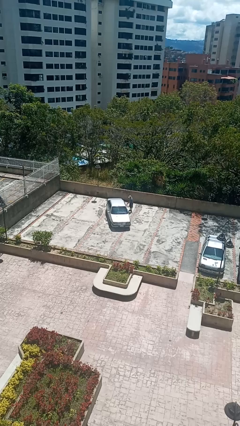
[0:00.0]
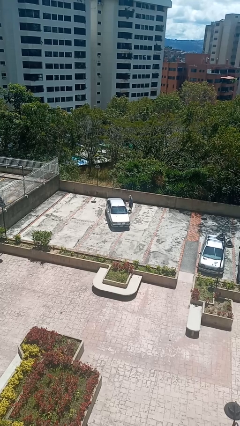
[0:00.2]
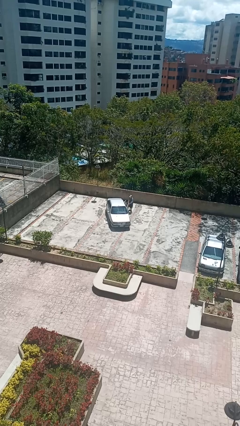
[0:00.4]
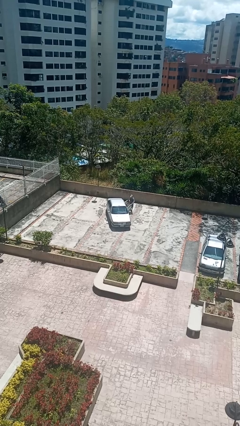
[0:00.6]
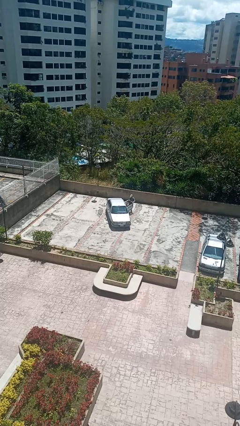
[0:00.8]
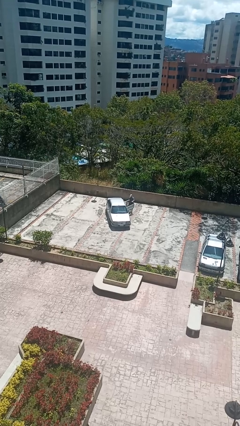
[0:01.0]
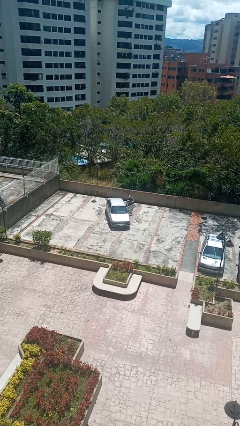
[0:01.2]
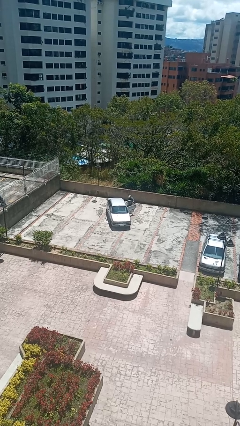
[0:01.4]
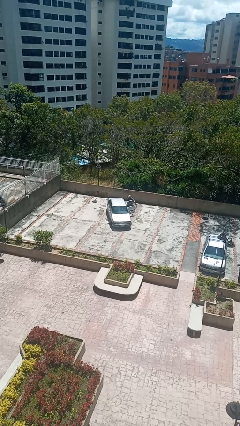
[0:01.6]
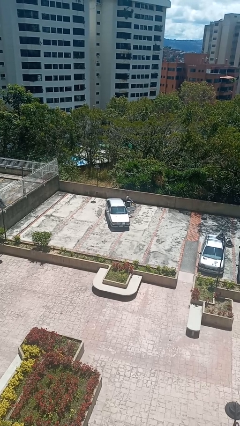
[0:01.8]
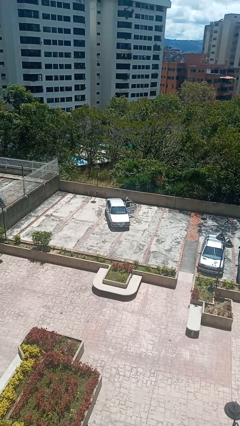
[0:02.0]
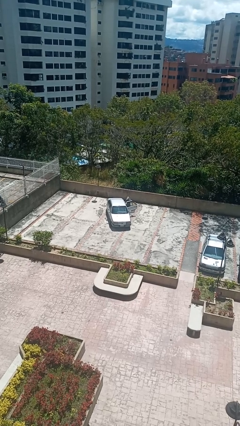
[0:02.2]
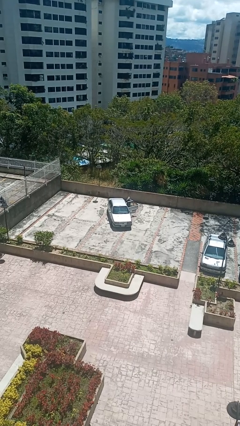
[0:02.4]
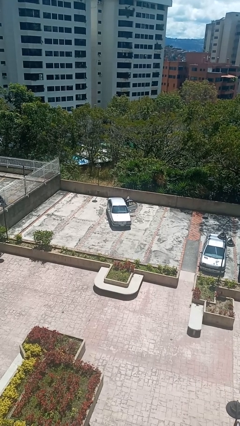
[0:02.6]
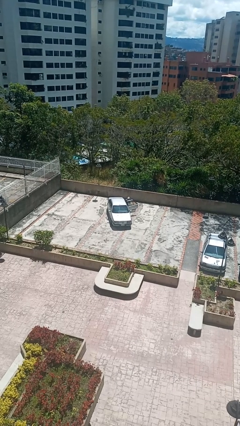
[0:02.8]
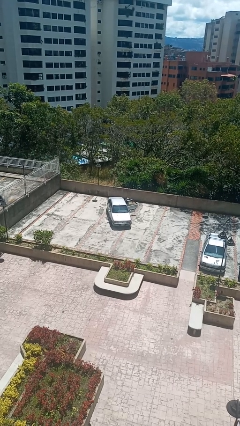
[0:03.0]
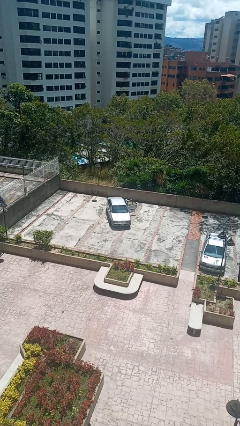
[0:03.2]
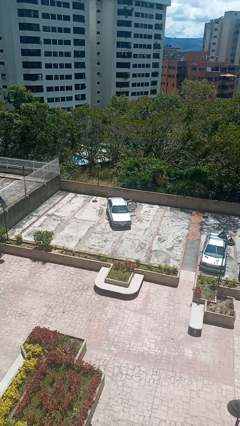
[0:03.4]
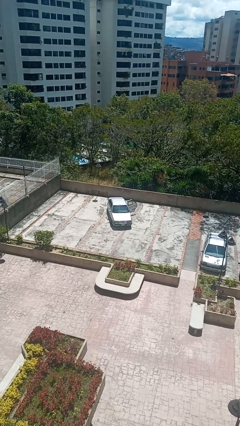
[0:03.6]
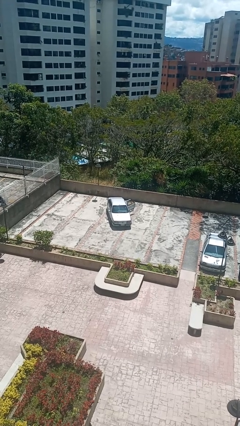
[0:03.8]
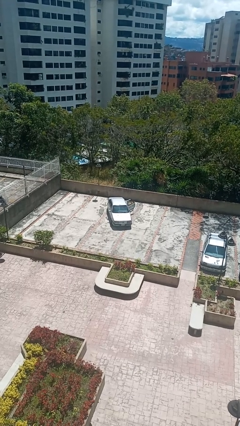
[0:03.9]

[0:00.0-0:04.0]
car picks up person

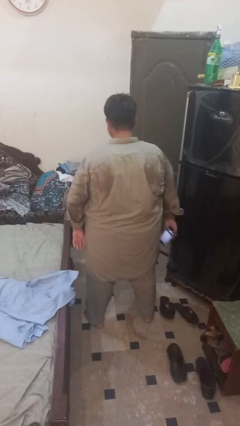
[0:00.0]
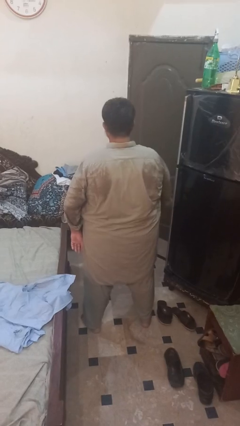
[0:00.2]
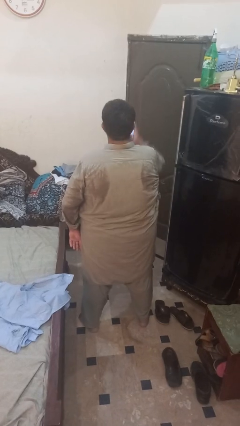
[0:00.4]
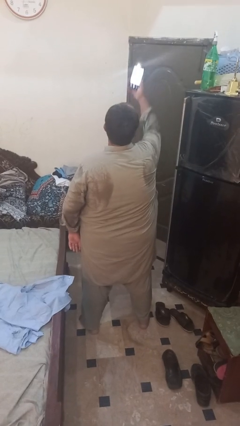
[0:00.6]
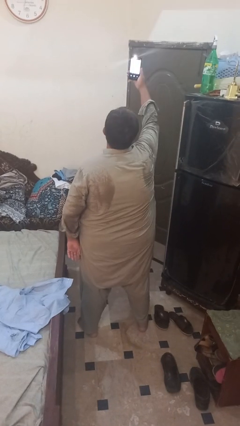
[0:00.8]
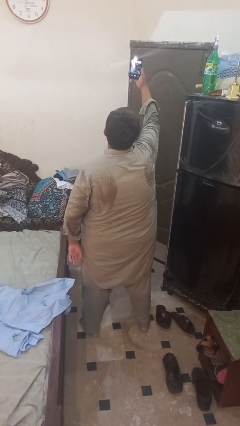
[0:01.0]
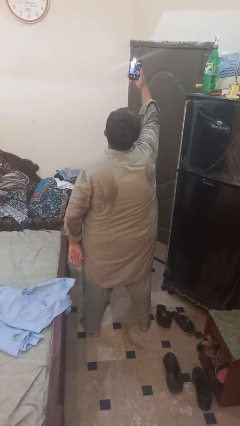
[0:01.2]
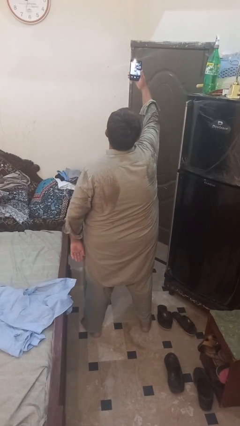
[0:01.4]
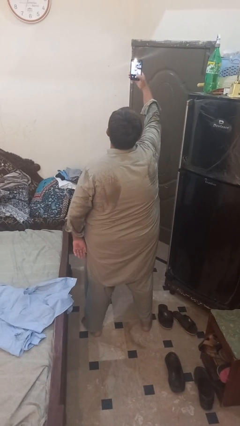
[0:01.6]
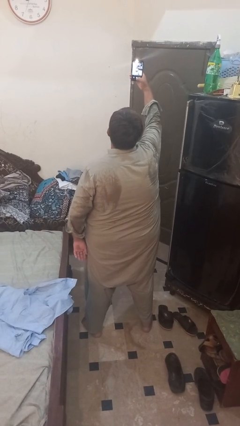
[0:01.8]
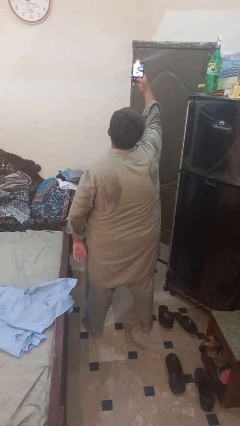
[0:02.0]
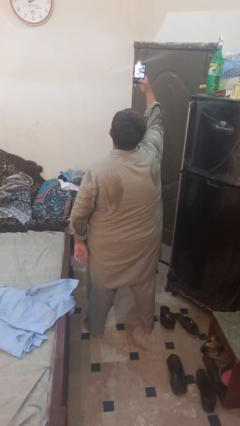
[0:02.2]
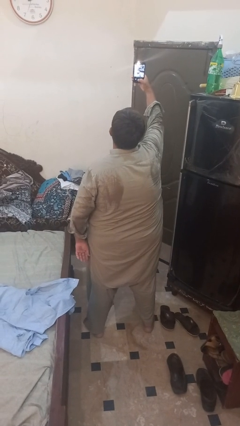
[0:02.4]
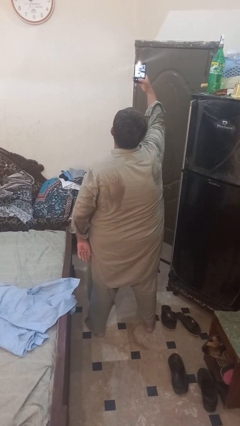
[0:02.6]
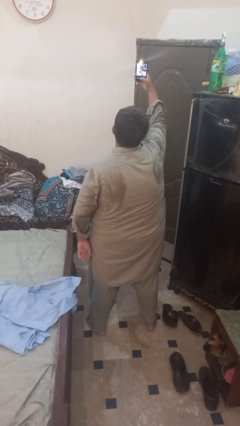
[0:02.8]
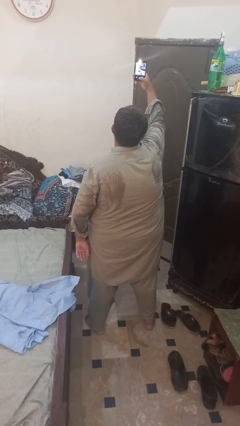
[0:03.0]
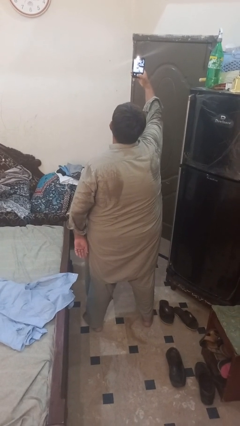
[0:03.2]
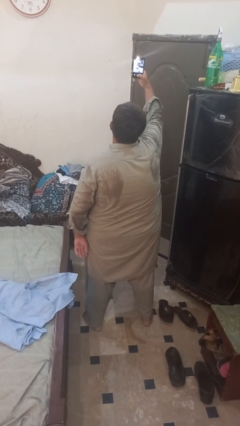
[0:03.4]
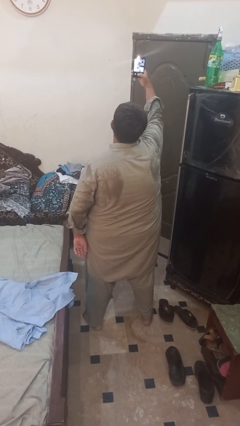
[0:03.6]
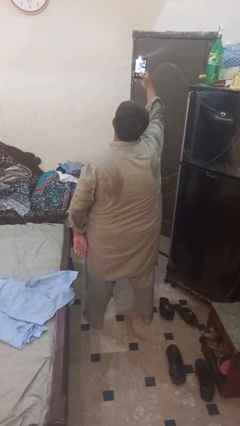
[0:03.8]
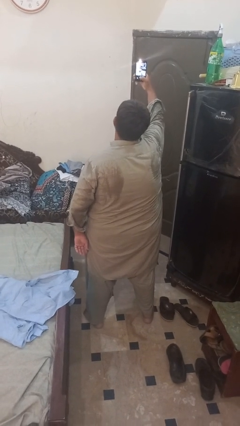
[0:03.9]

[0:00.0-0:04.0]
person takes selfie

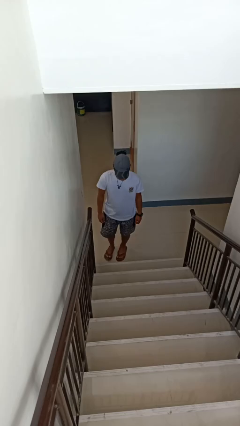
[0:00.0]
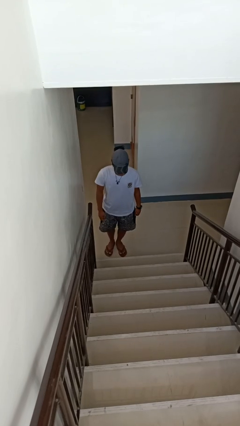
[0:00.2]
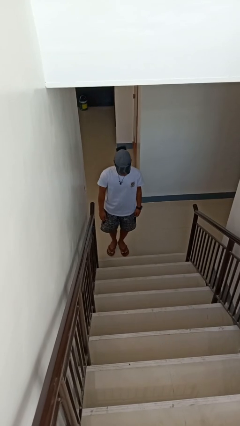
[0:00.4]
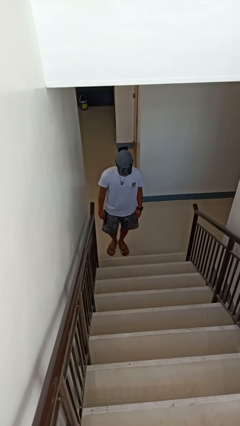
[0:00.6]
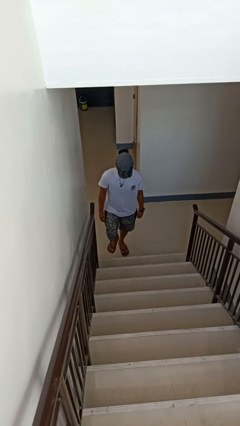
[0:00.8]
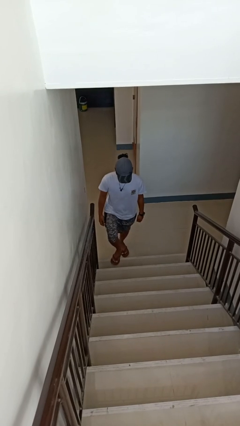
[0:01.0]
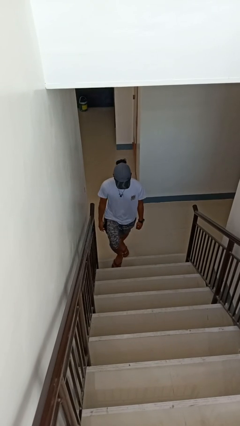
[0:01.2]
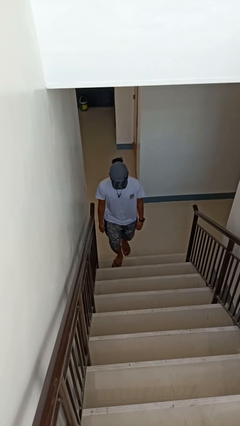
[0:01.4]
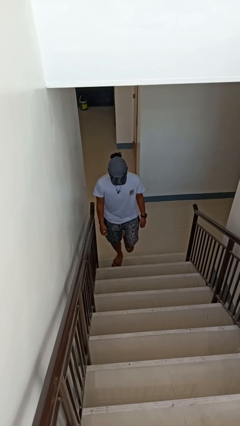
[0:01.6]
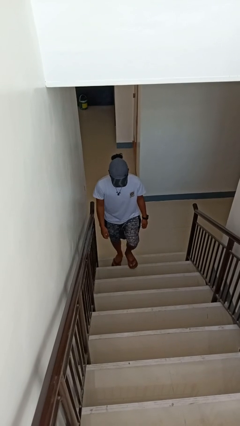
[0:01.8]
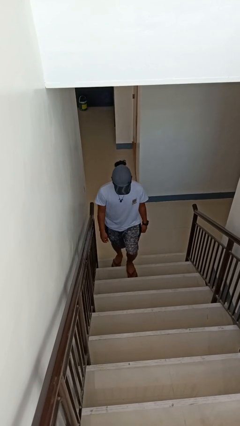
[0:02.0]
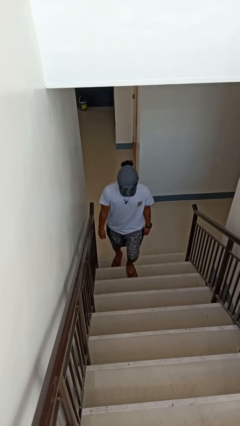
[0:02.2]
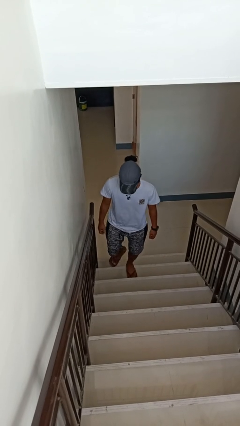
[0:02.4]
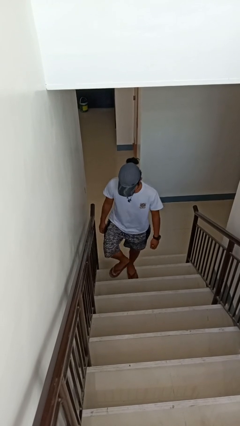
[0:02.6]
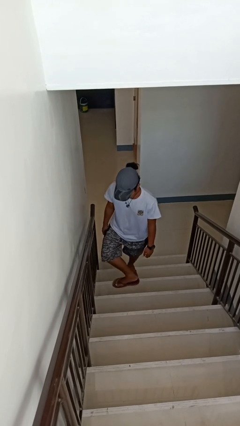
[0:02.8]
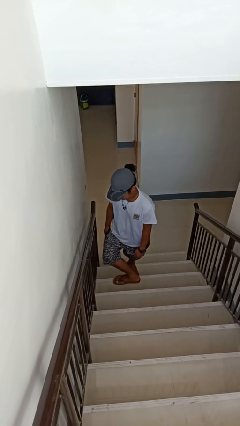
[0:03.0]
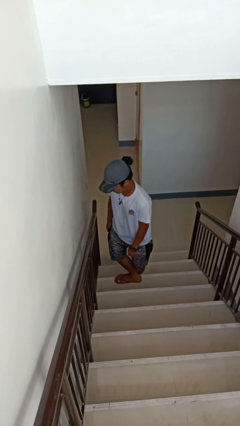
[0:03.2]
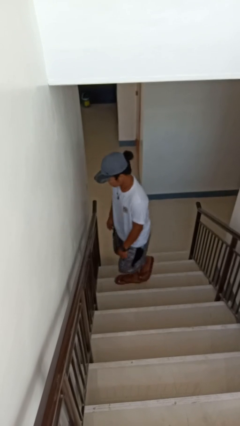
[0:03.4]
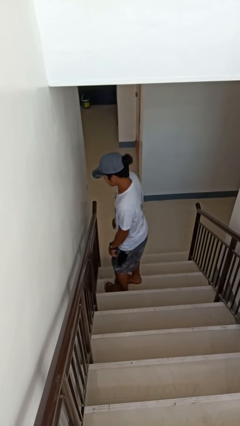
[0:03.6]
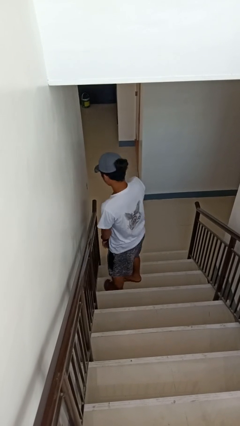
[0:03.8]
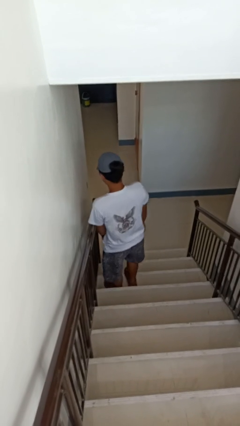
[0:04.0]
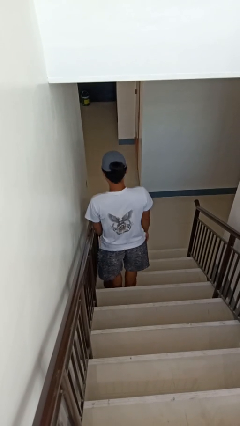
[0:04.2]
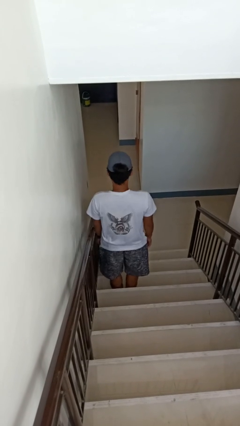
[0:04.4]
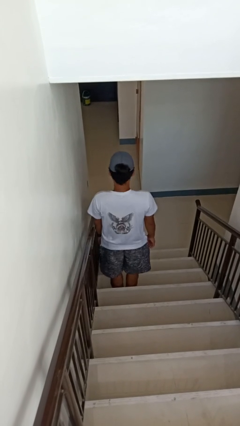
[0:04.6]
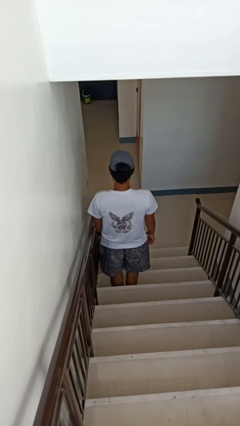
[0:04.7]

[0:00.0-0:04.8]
person climbs up stairs

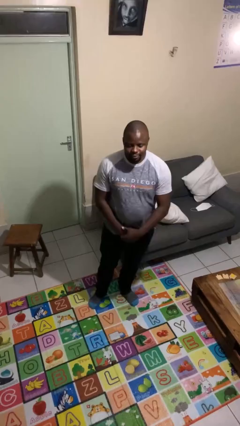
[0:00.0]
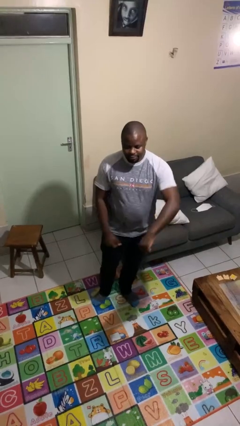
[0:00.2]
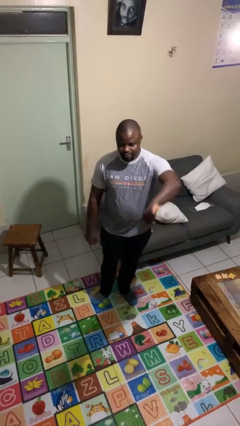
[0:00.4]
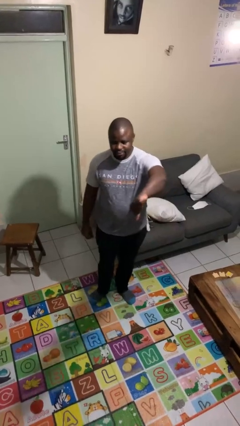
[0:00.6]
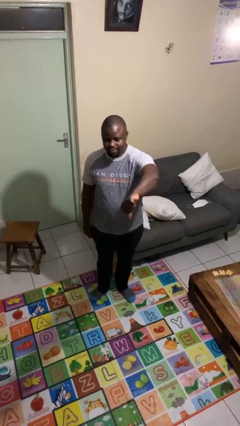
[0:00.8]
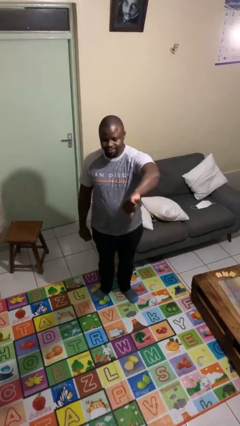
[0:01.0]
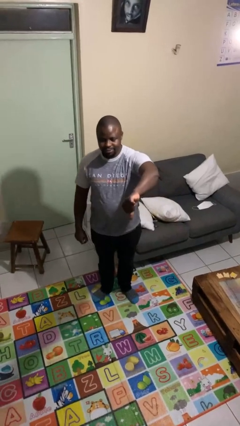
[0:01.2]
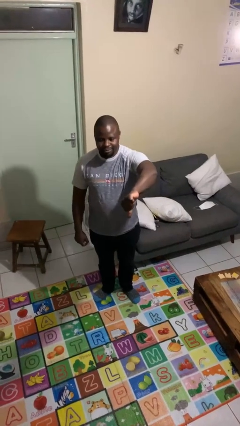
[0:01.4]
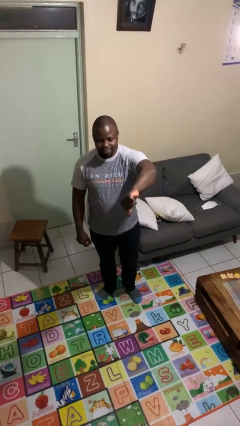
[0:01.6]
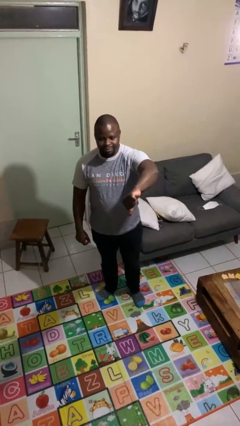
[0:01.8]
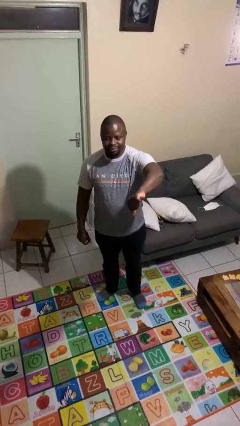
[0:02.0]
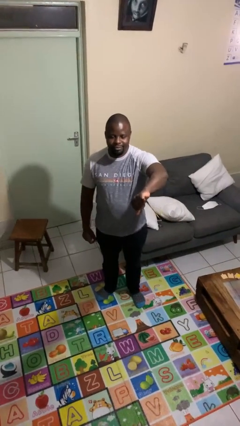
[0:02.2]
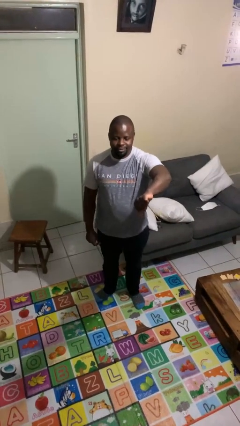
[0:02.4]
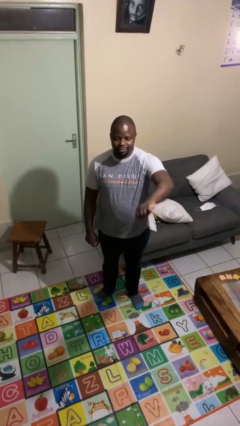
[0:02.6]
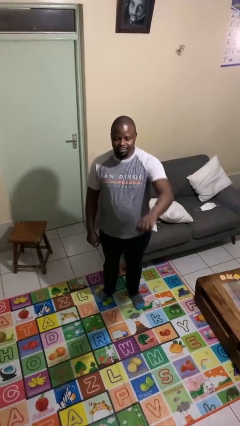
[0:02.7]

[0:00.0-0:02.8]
person gestures thumbs down

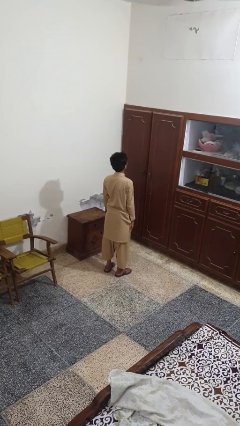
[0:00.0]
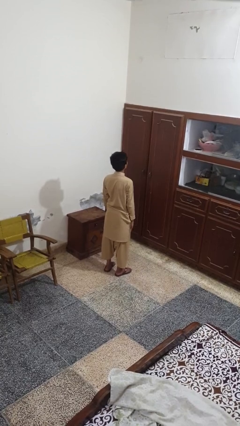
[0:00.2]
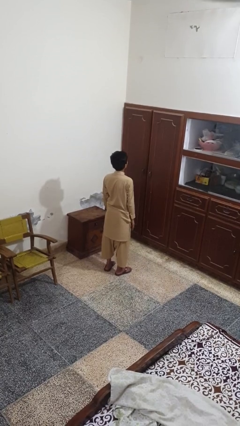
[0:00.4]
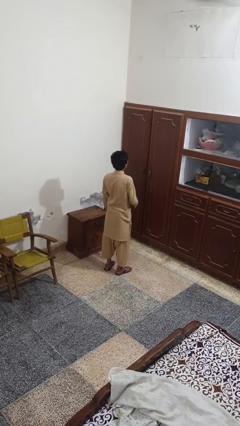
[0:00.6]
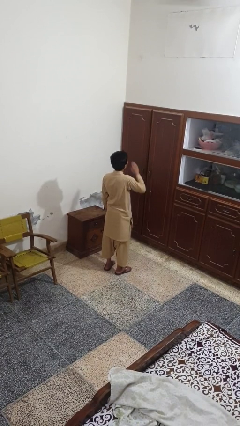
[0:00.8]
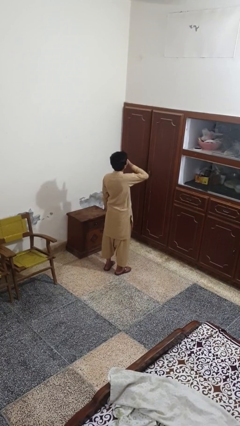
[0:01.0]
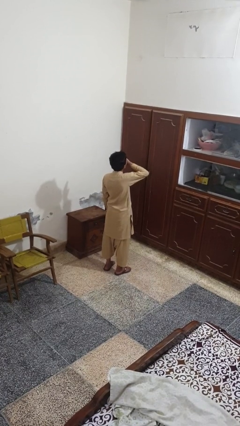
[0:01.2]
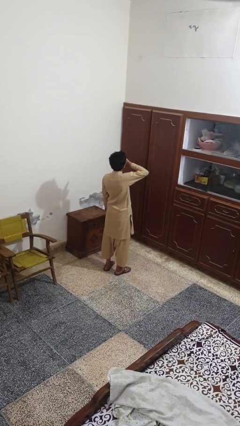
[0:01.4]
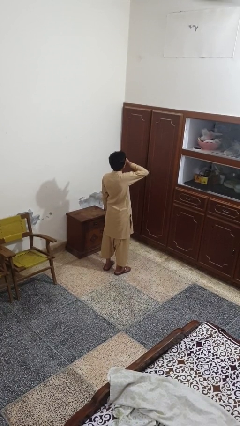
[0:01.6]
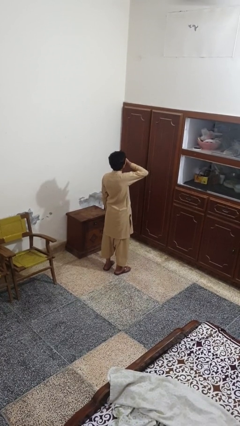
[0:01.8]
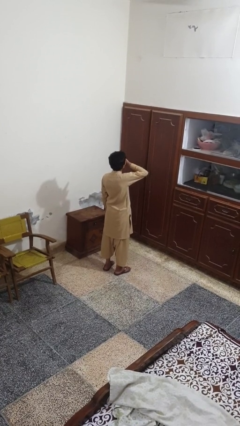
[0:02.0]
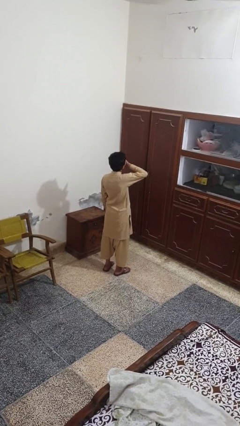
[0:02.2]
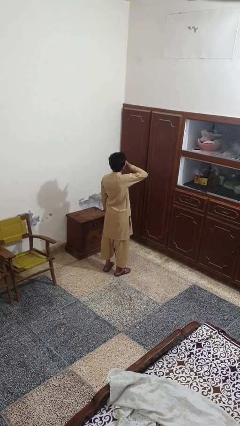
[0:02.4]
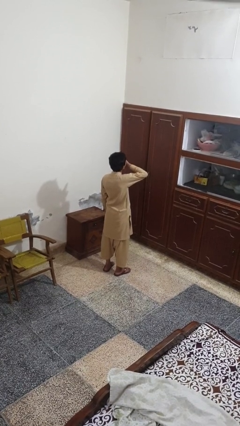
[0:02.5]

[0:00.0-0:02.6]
person yawns
